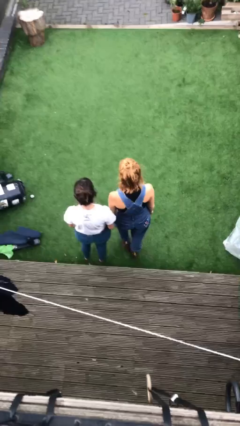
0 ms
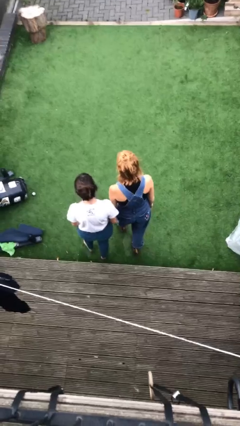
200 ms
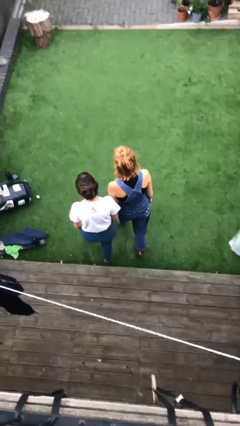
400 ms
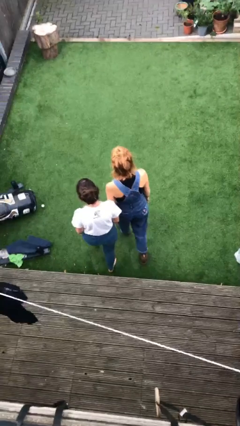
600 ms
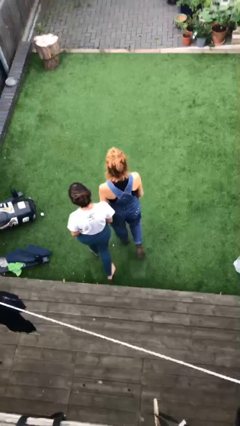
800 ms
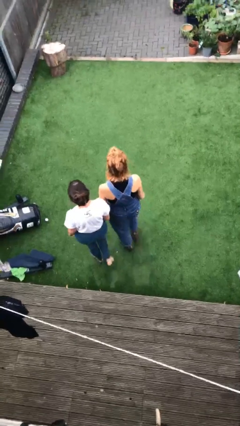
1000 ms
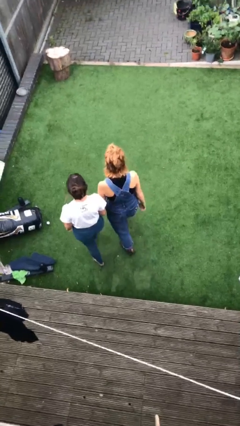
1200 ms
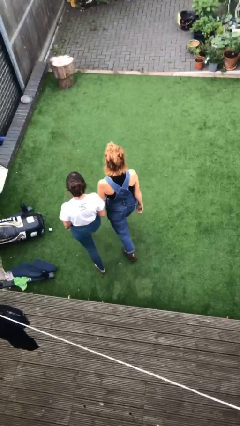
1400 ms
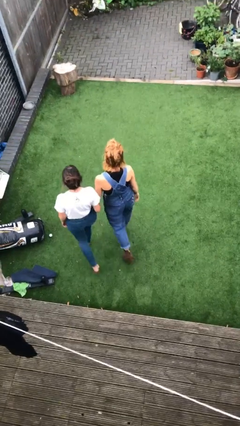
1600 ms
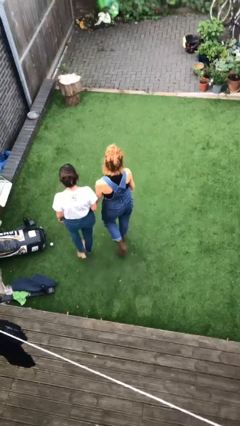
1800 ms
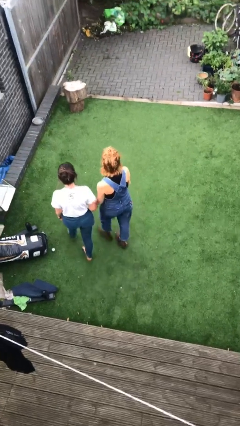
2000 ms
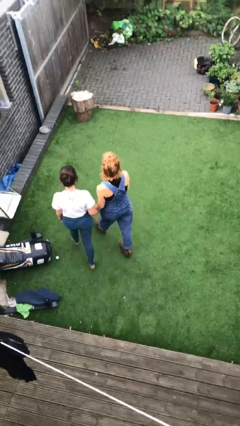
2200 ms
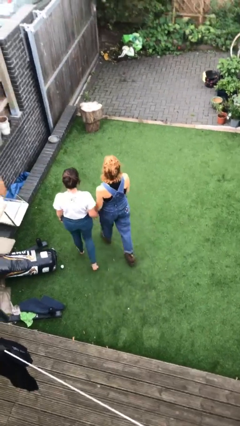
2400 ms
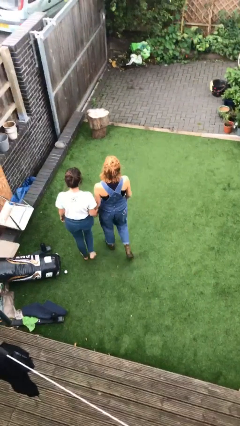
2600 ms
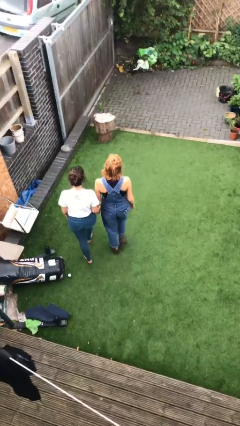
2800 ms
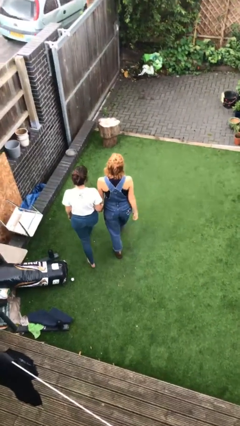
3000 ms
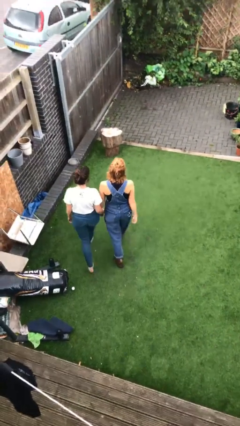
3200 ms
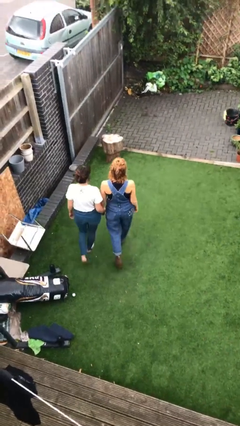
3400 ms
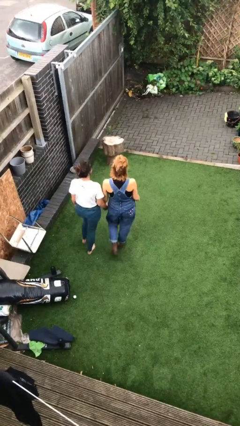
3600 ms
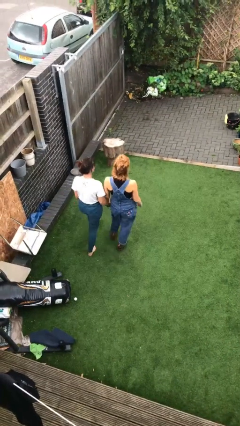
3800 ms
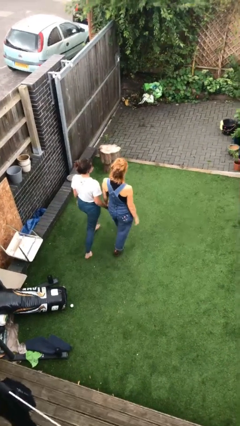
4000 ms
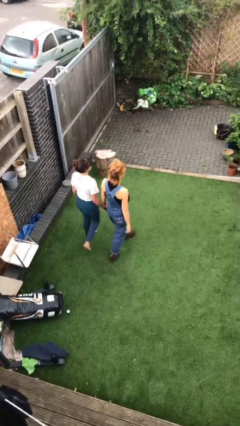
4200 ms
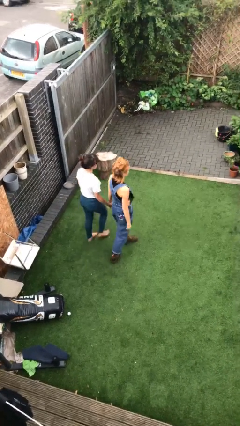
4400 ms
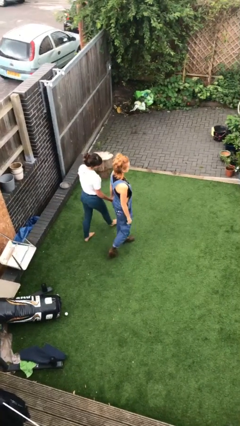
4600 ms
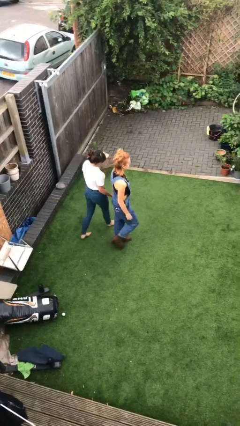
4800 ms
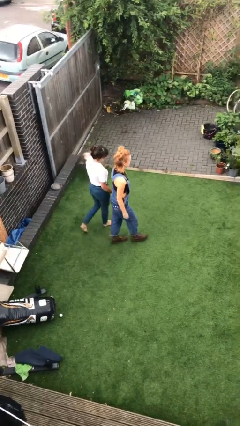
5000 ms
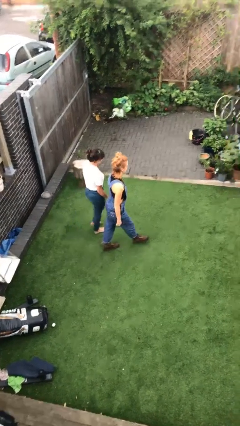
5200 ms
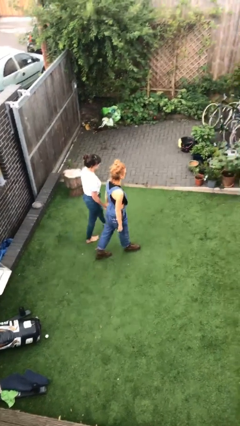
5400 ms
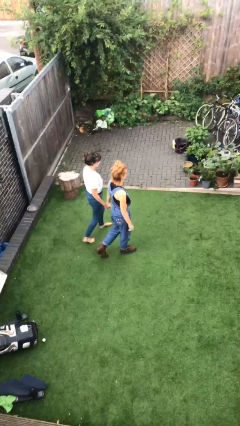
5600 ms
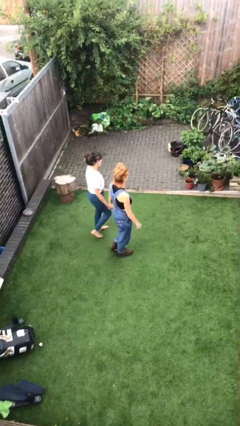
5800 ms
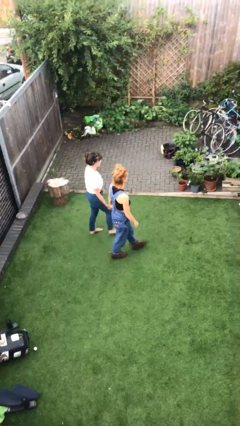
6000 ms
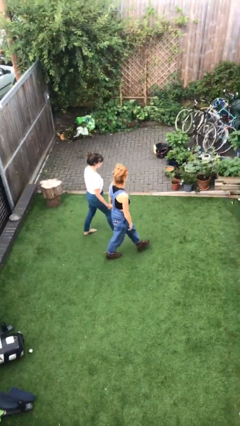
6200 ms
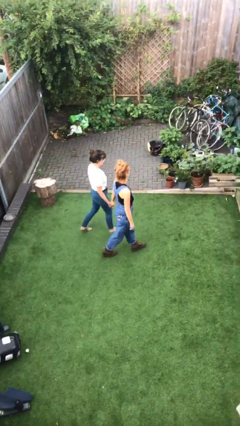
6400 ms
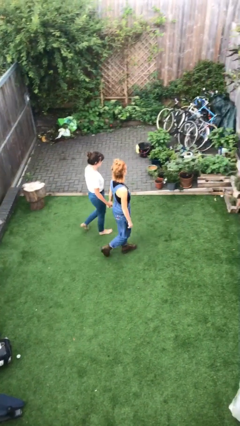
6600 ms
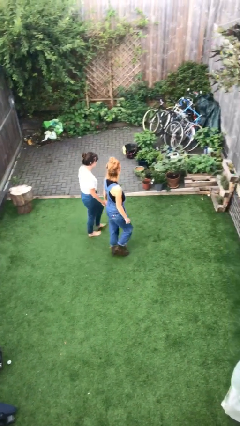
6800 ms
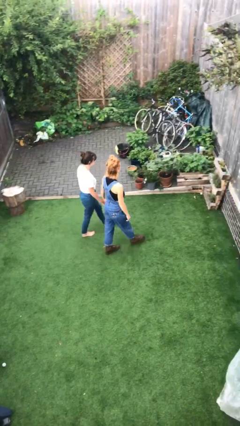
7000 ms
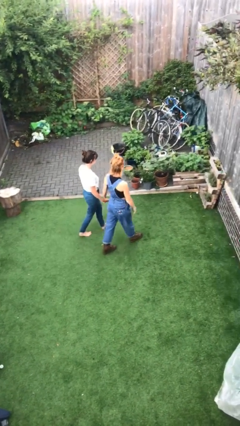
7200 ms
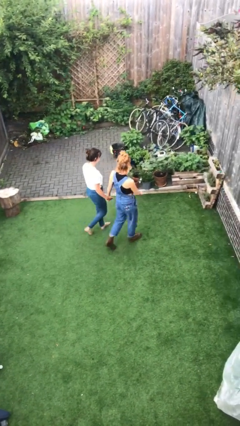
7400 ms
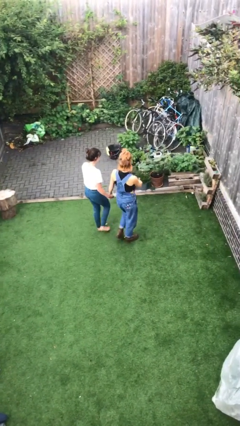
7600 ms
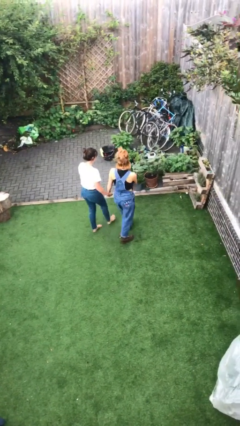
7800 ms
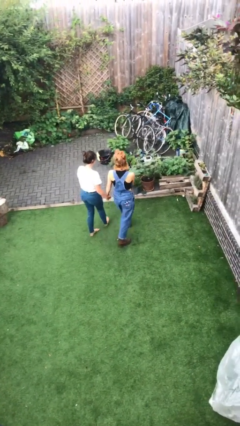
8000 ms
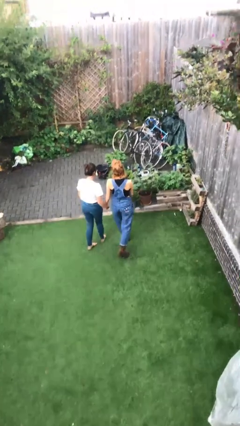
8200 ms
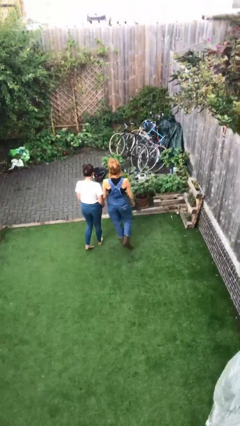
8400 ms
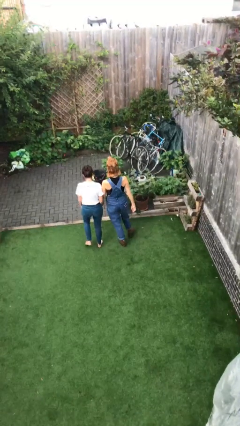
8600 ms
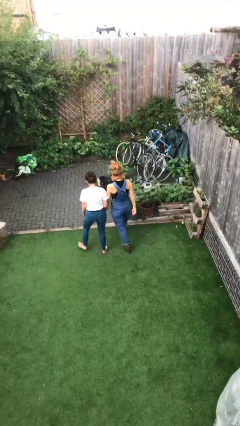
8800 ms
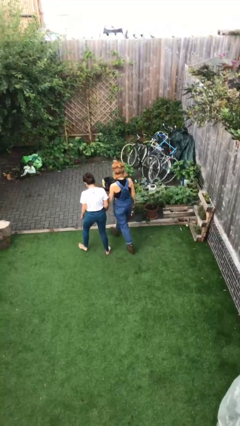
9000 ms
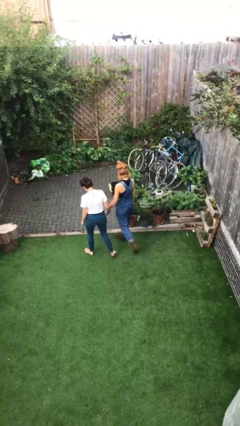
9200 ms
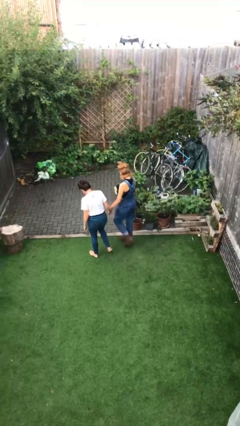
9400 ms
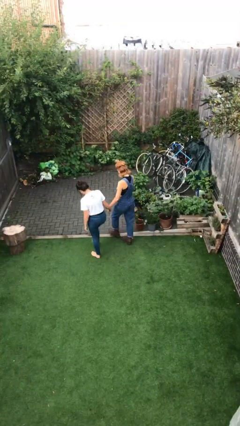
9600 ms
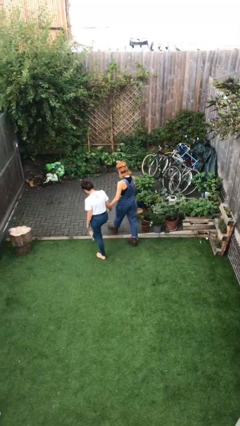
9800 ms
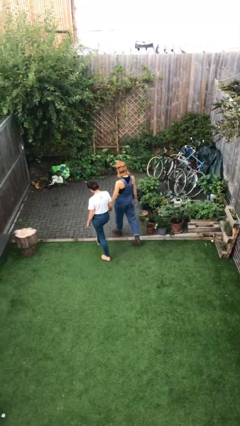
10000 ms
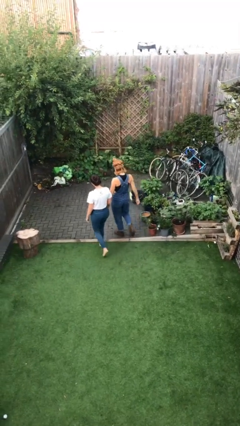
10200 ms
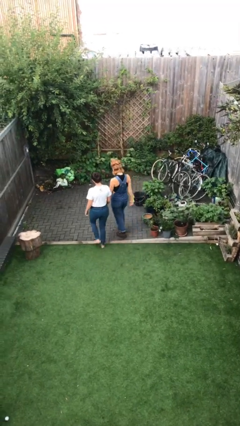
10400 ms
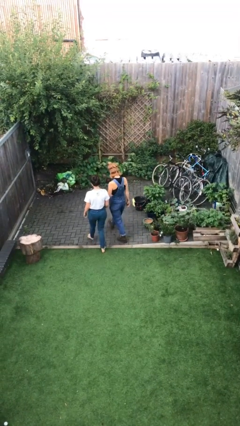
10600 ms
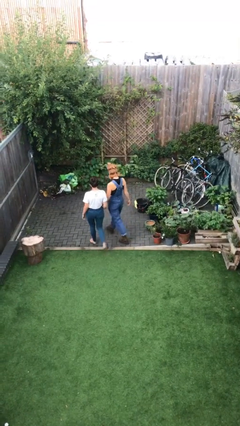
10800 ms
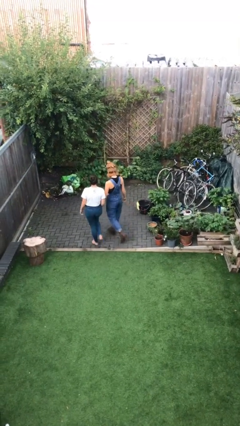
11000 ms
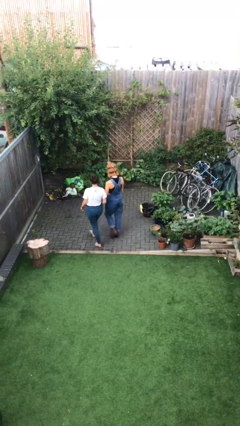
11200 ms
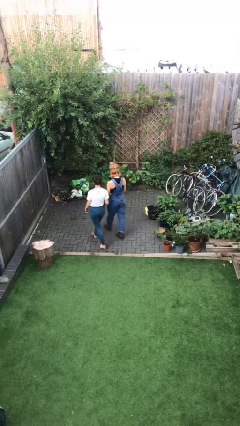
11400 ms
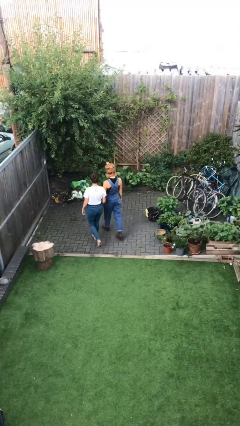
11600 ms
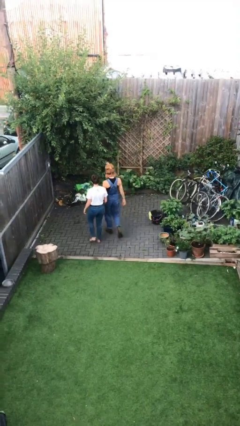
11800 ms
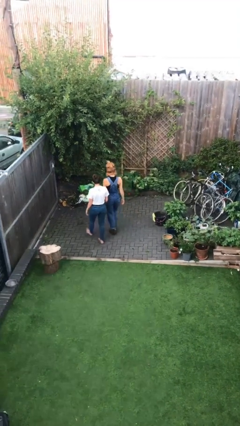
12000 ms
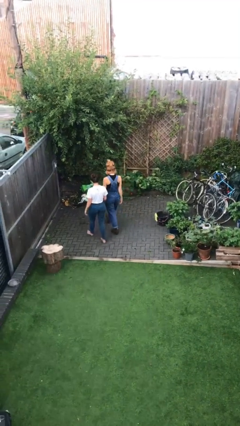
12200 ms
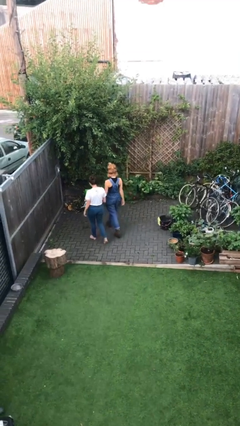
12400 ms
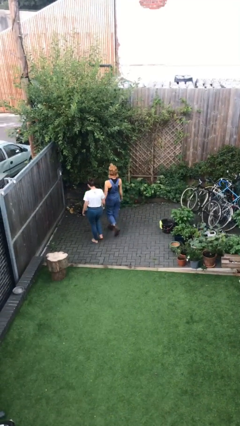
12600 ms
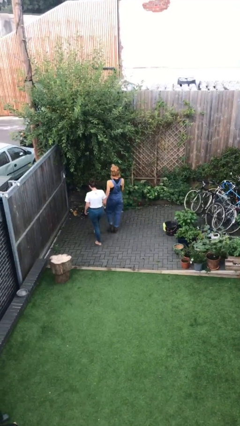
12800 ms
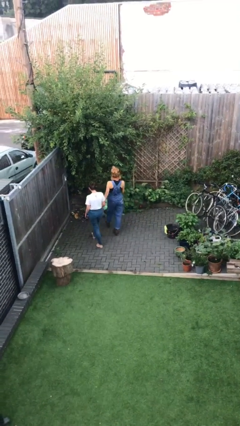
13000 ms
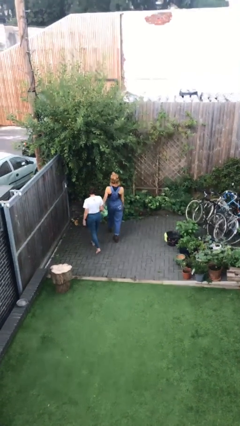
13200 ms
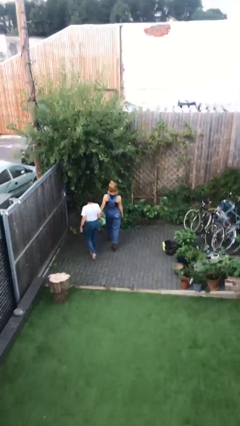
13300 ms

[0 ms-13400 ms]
person holds hand

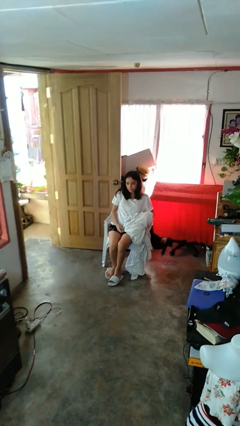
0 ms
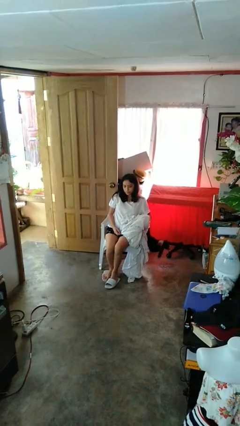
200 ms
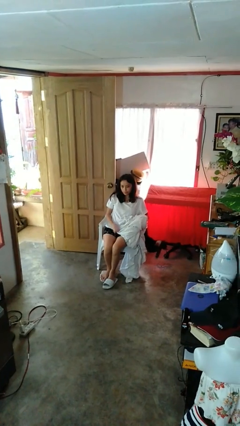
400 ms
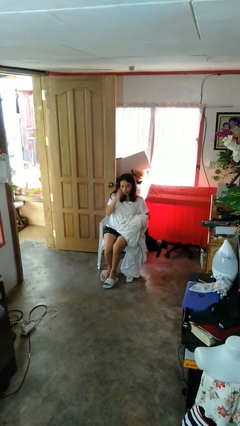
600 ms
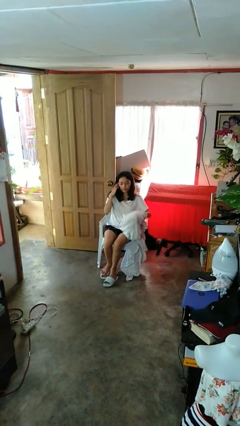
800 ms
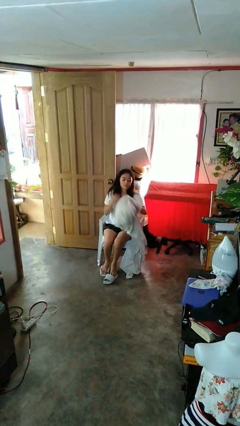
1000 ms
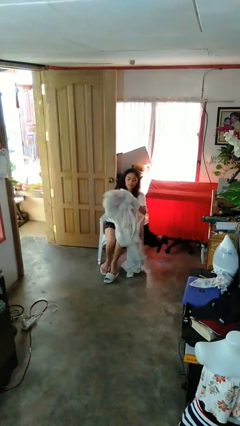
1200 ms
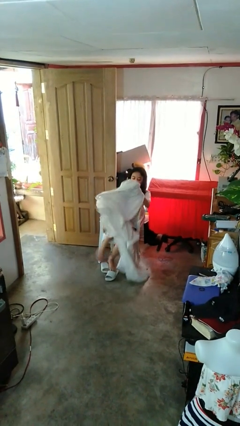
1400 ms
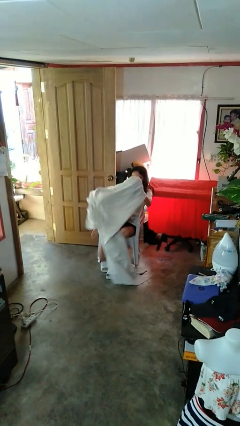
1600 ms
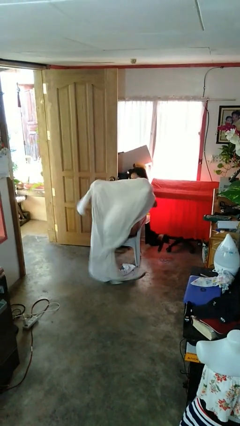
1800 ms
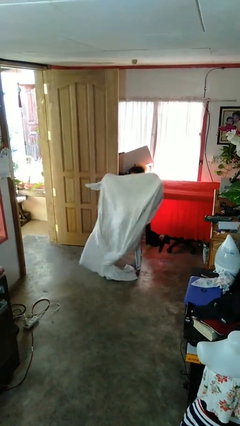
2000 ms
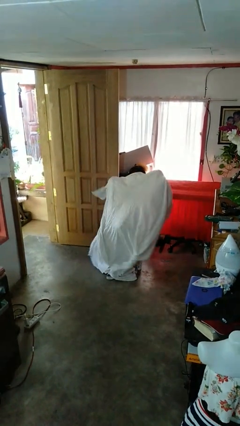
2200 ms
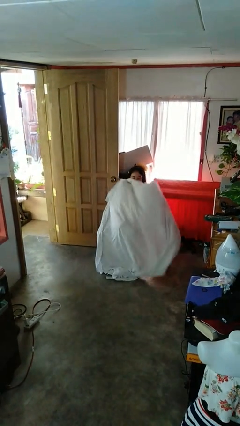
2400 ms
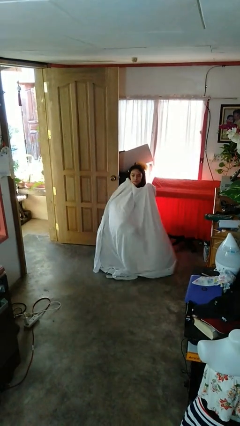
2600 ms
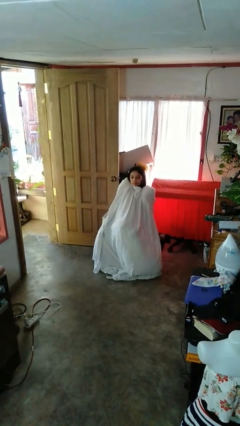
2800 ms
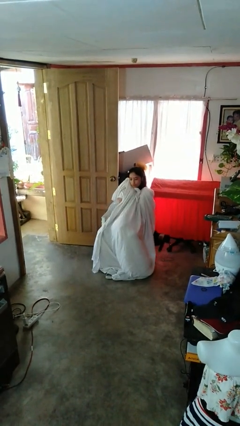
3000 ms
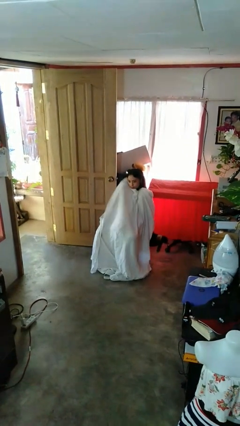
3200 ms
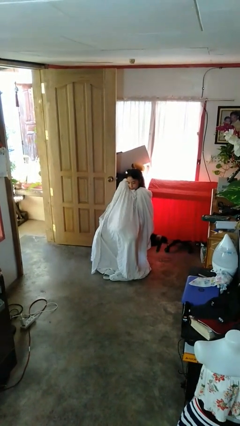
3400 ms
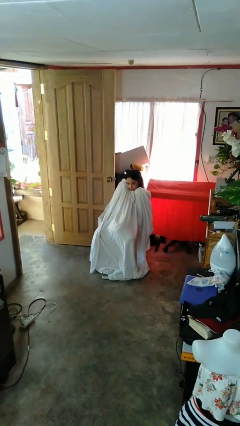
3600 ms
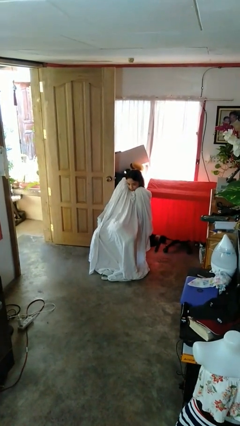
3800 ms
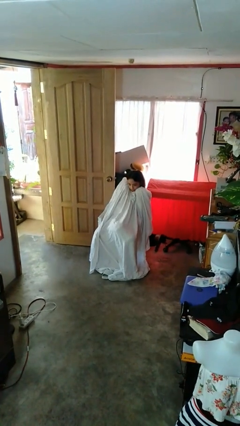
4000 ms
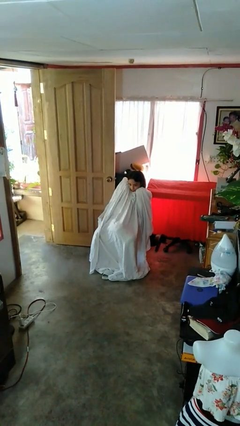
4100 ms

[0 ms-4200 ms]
person covers with blanket

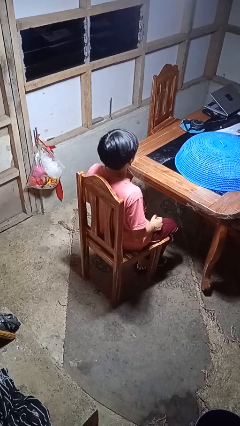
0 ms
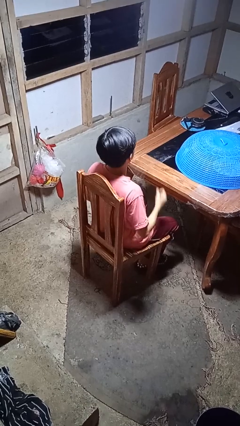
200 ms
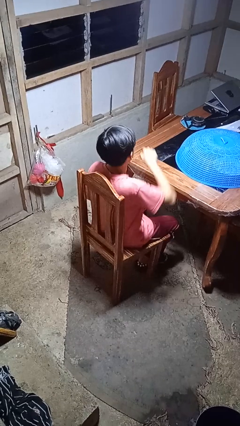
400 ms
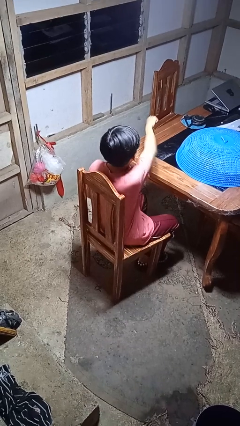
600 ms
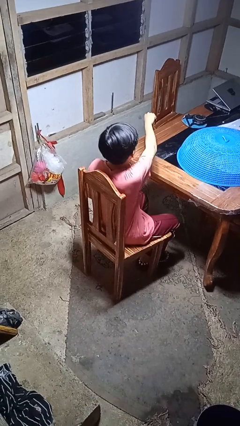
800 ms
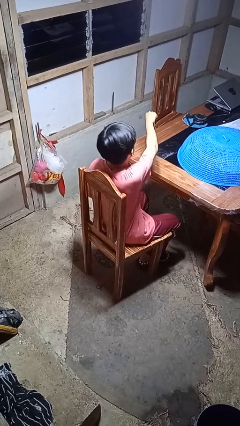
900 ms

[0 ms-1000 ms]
person punches
